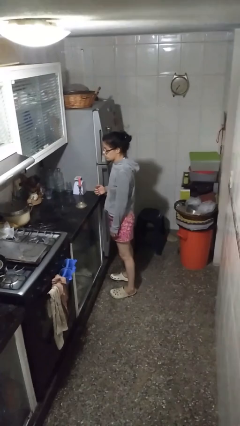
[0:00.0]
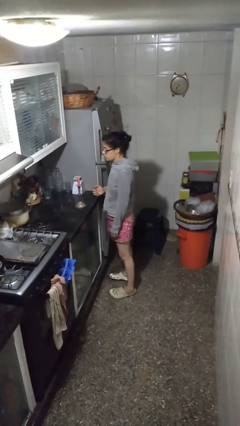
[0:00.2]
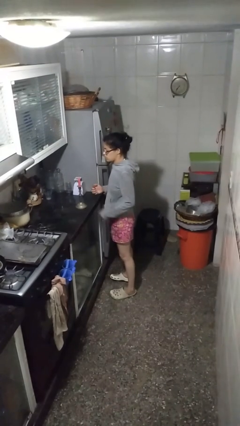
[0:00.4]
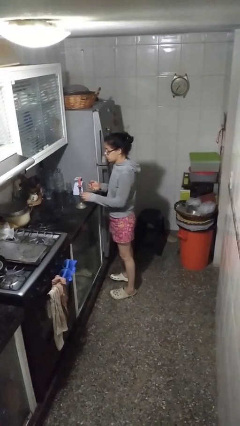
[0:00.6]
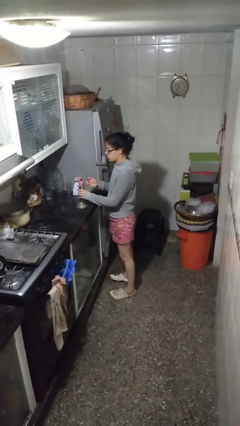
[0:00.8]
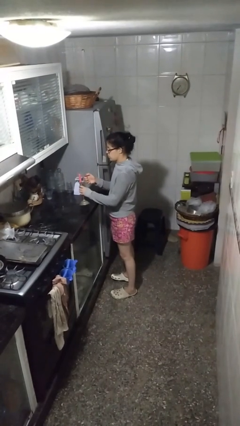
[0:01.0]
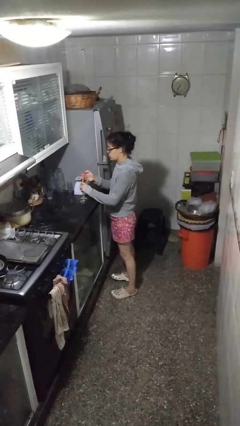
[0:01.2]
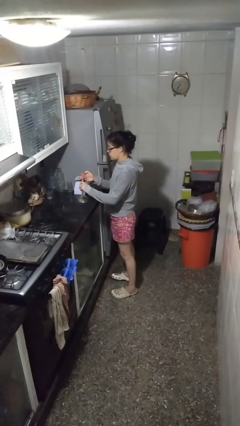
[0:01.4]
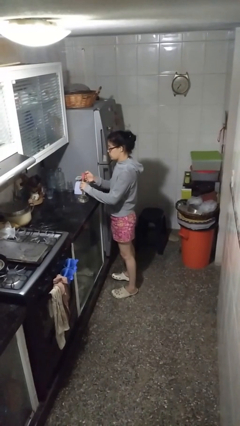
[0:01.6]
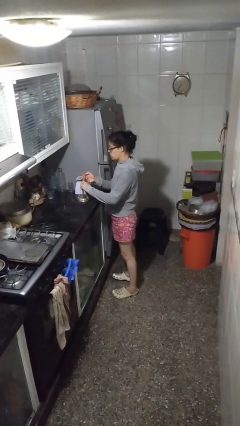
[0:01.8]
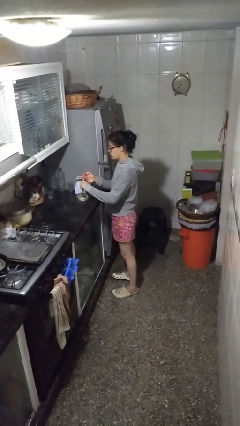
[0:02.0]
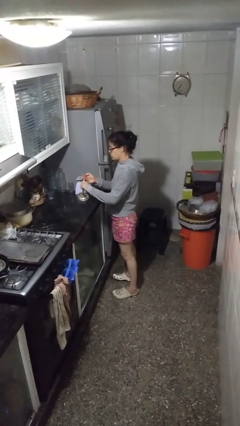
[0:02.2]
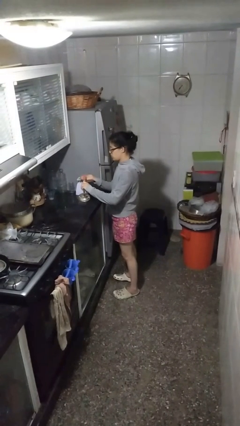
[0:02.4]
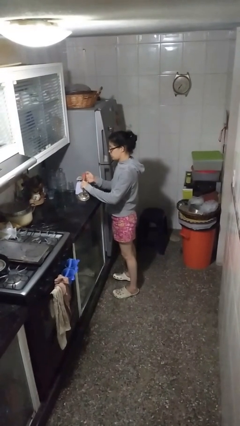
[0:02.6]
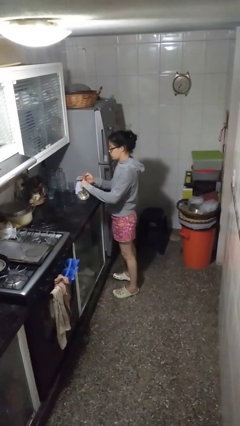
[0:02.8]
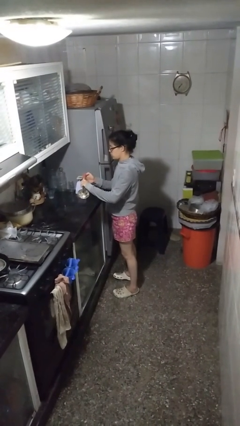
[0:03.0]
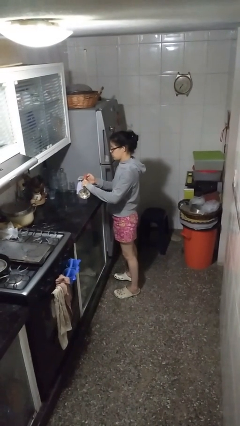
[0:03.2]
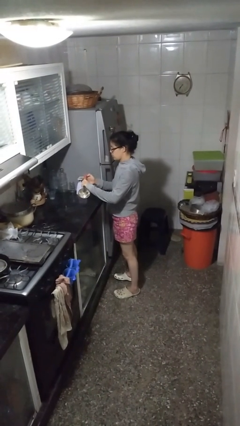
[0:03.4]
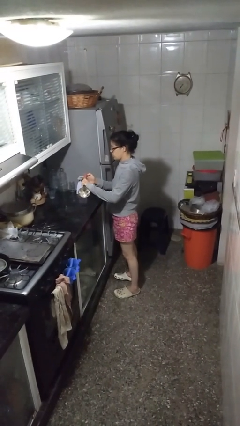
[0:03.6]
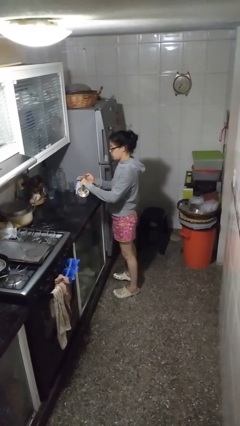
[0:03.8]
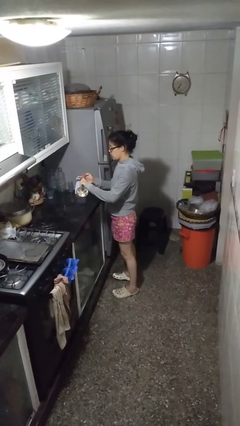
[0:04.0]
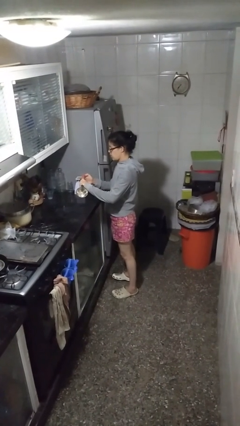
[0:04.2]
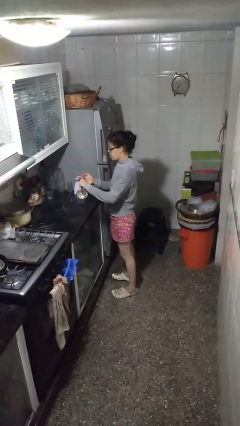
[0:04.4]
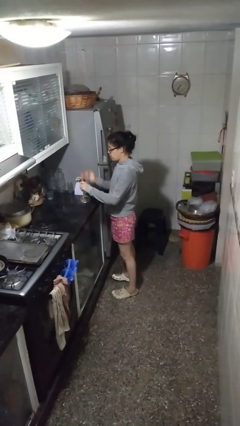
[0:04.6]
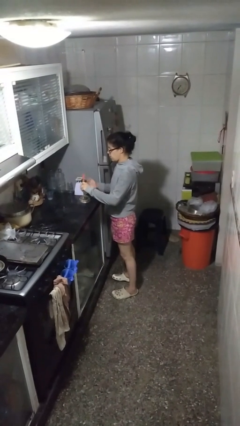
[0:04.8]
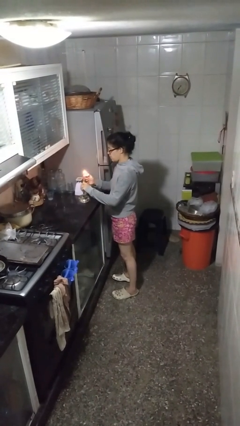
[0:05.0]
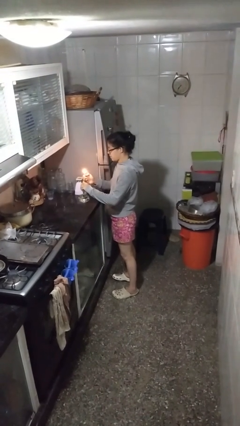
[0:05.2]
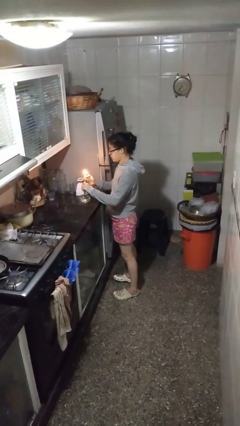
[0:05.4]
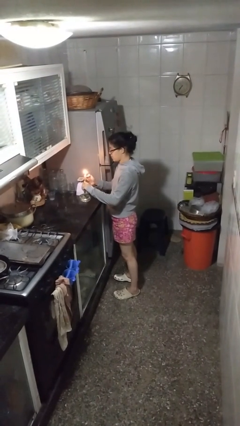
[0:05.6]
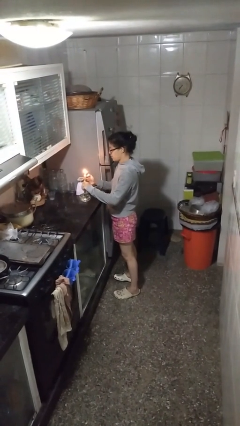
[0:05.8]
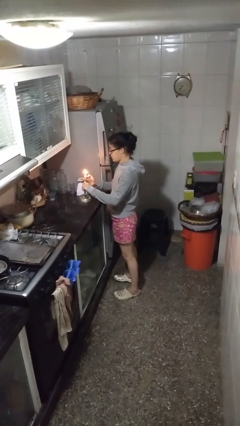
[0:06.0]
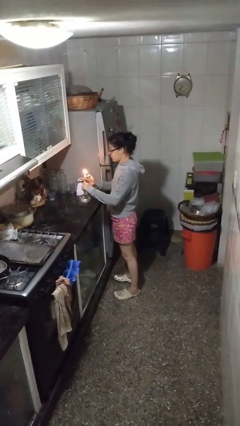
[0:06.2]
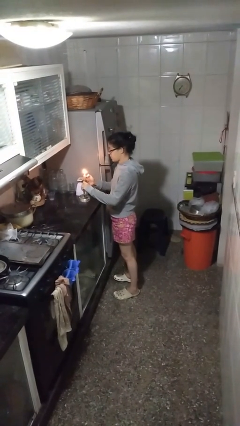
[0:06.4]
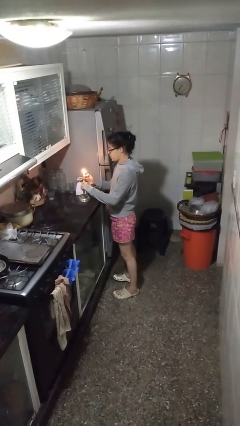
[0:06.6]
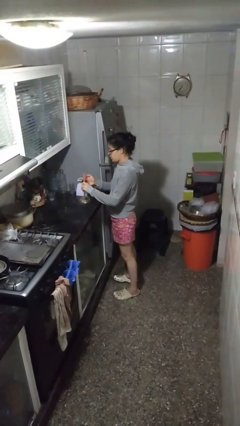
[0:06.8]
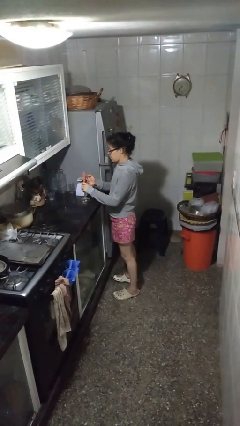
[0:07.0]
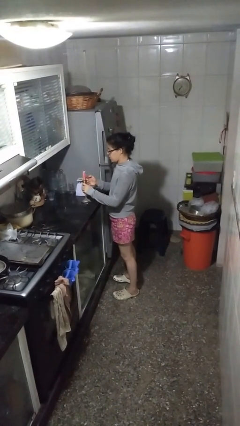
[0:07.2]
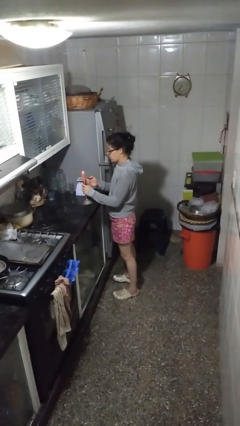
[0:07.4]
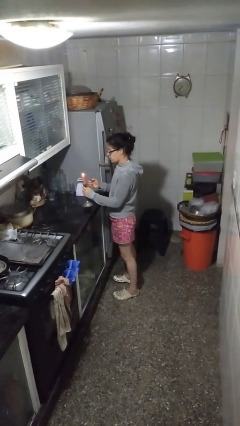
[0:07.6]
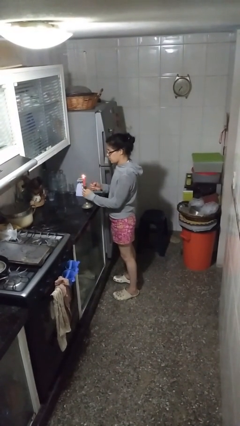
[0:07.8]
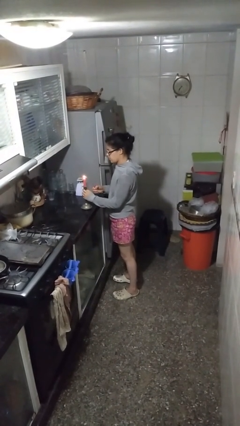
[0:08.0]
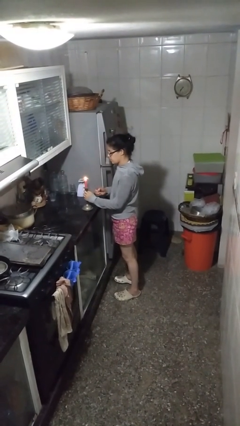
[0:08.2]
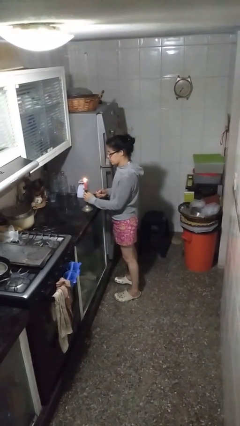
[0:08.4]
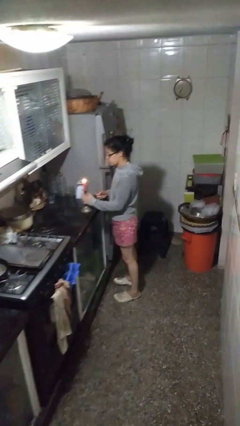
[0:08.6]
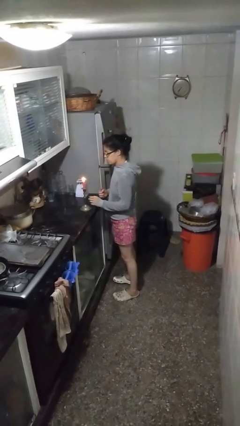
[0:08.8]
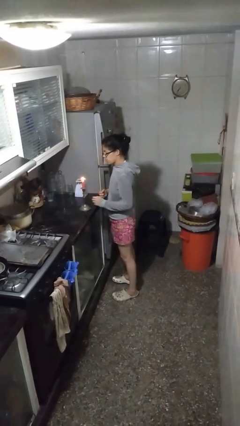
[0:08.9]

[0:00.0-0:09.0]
person lights candle

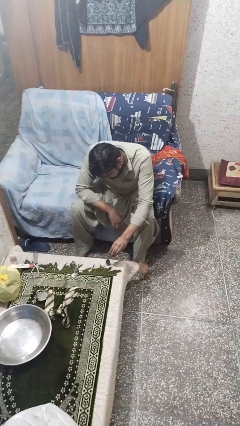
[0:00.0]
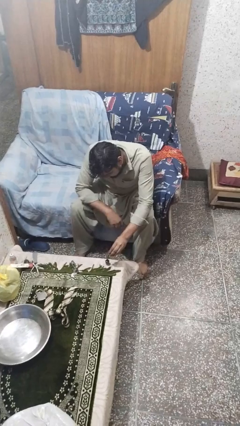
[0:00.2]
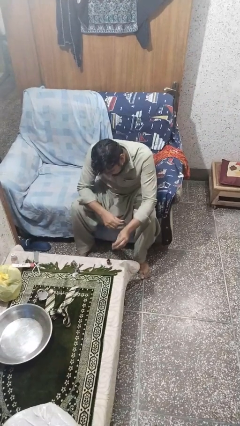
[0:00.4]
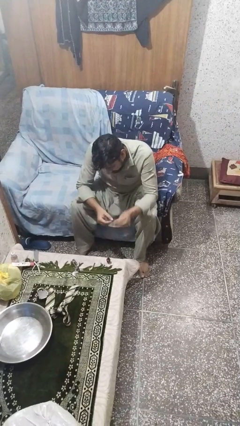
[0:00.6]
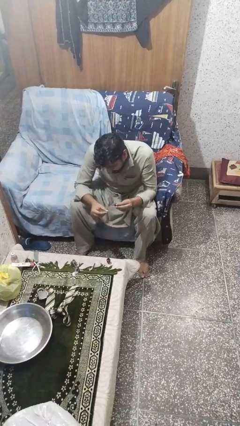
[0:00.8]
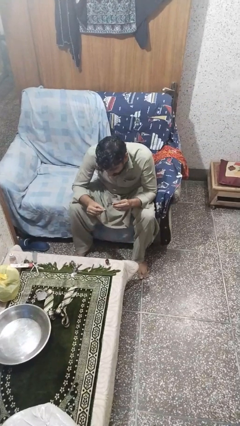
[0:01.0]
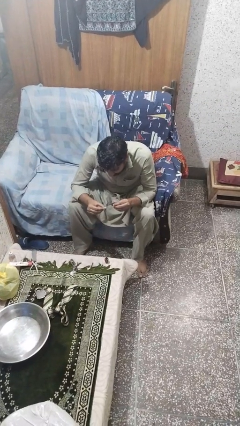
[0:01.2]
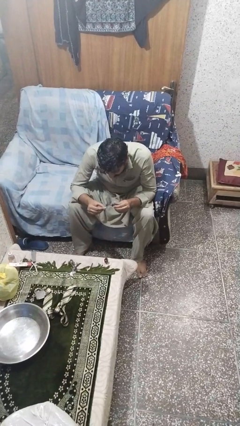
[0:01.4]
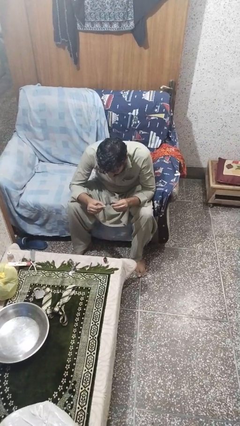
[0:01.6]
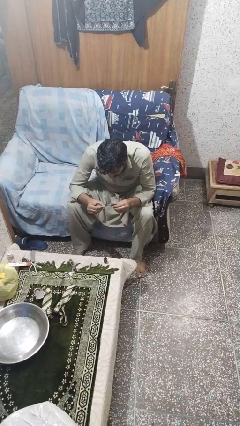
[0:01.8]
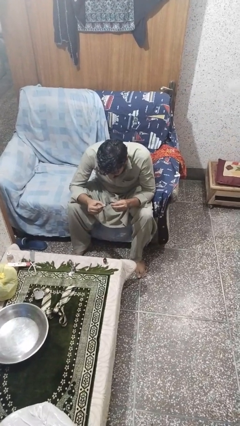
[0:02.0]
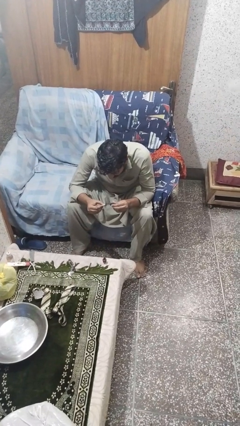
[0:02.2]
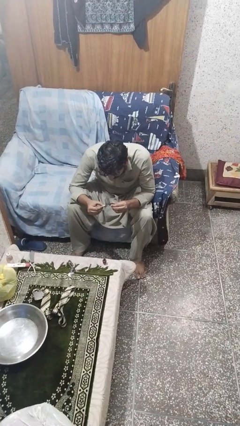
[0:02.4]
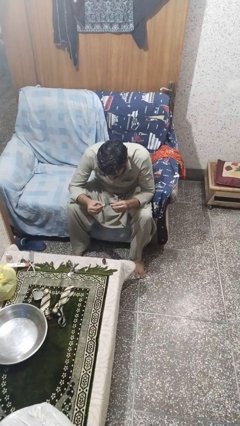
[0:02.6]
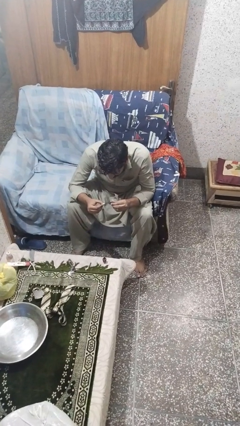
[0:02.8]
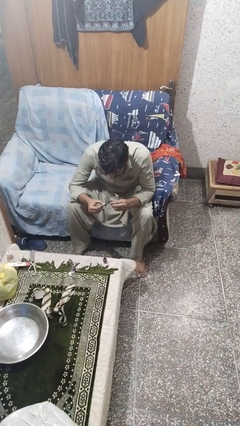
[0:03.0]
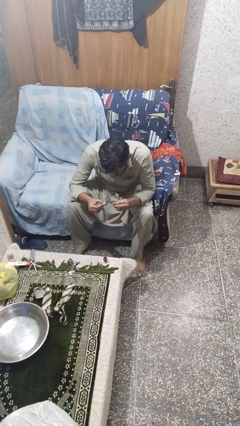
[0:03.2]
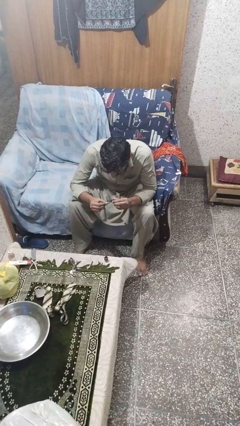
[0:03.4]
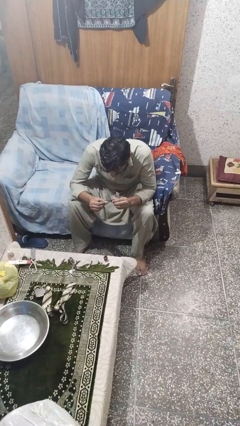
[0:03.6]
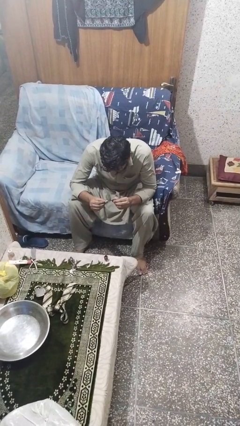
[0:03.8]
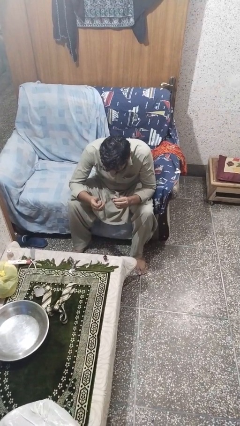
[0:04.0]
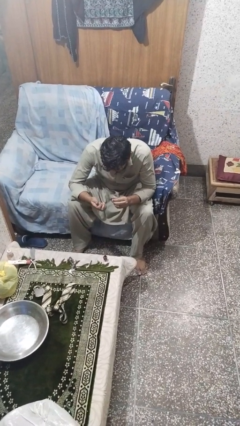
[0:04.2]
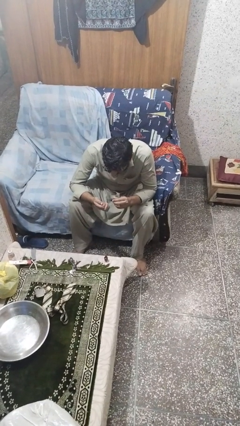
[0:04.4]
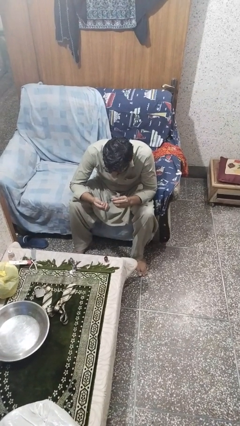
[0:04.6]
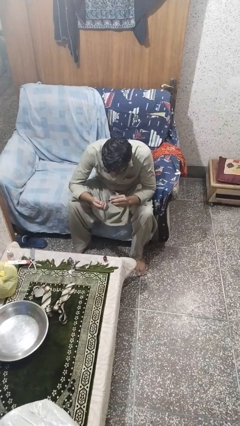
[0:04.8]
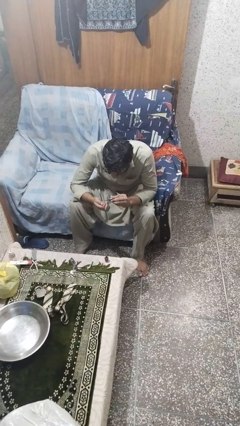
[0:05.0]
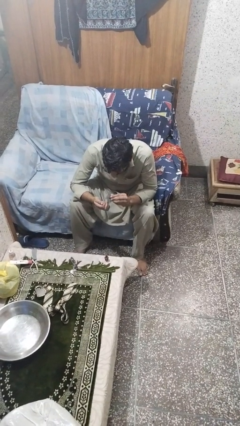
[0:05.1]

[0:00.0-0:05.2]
person paints fingernails

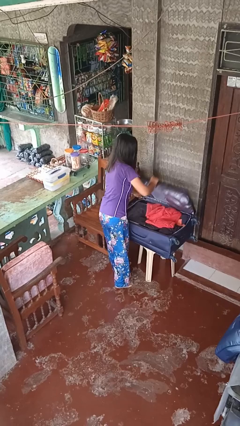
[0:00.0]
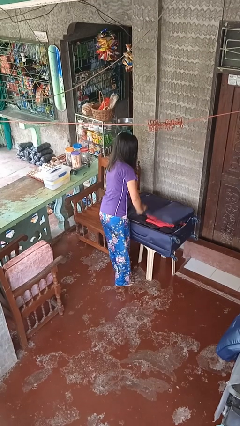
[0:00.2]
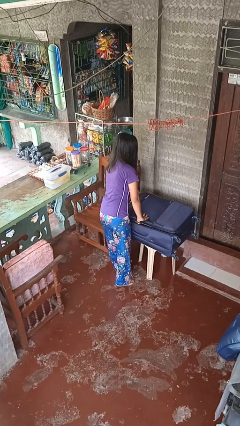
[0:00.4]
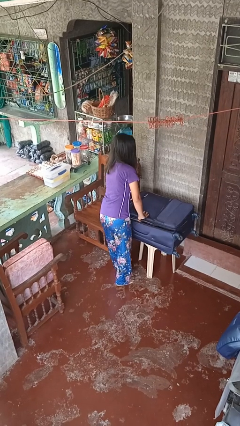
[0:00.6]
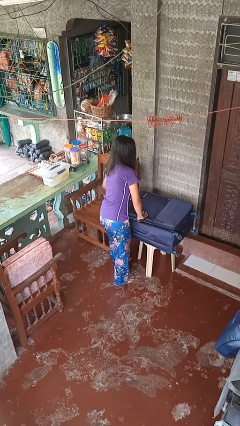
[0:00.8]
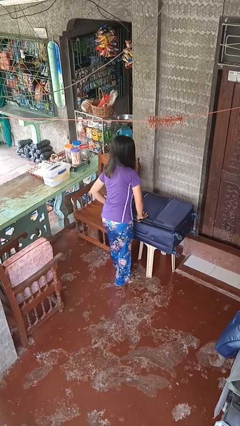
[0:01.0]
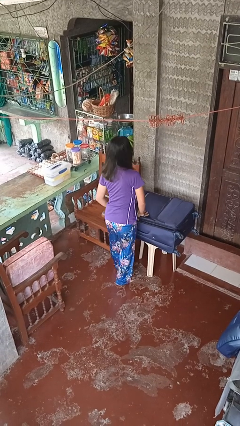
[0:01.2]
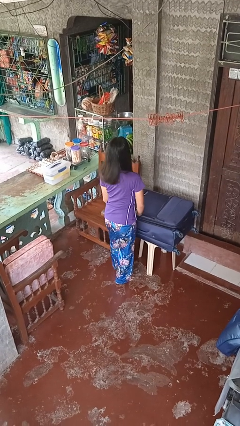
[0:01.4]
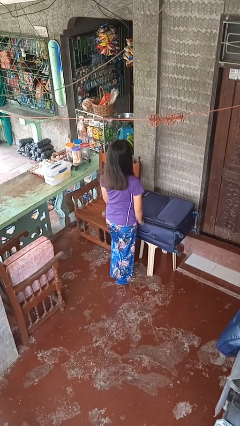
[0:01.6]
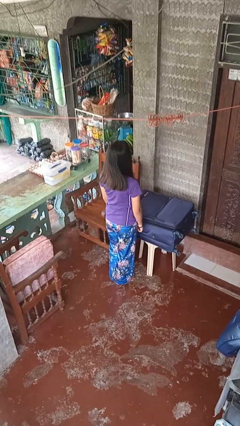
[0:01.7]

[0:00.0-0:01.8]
person closes suitcase

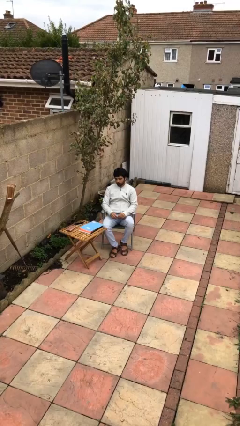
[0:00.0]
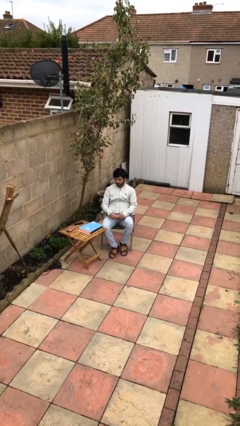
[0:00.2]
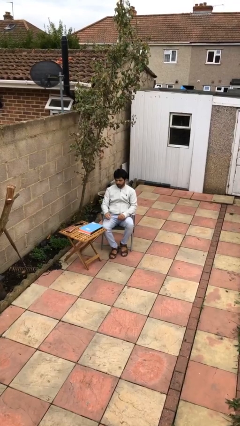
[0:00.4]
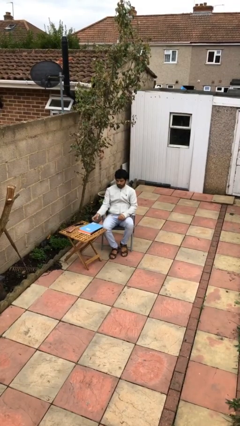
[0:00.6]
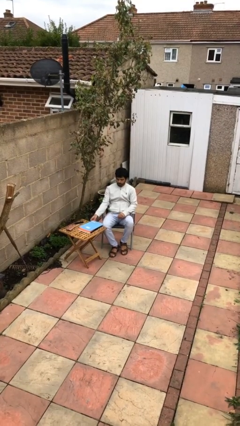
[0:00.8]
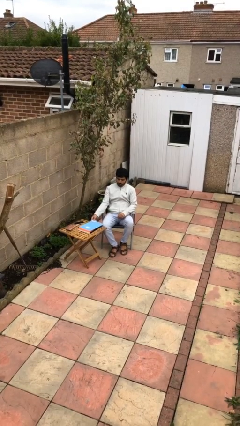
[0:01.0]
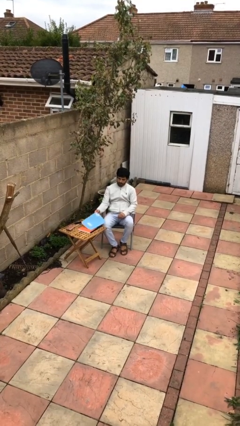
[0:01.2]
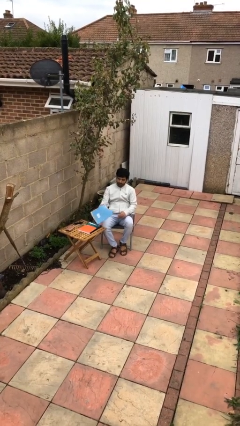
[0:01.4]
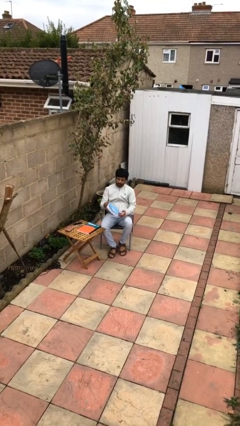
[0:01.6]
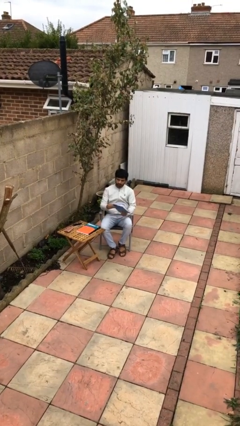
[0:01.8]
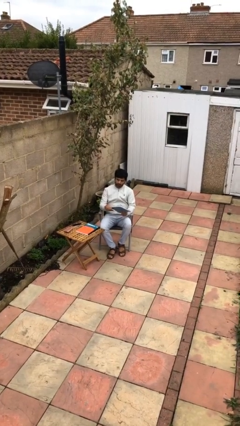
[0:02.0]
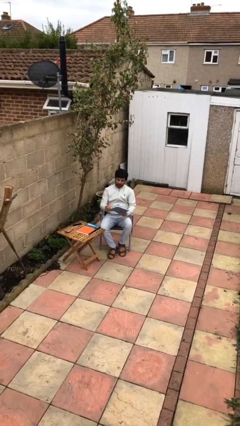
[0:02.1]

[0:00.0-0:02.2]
person picks up object from table
